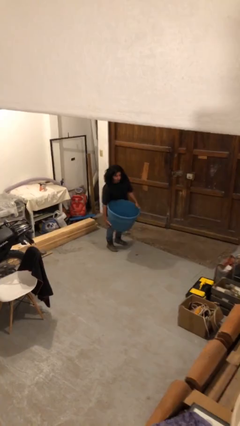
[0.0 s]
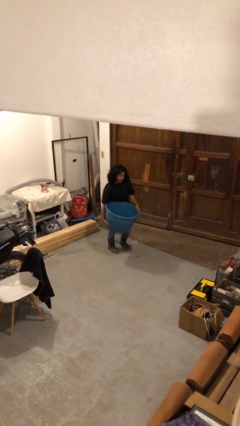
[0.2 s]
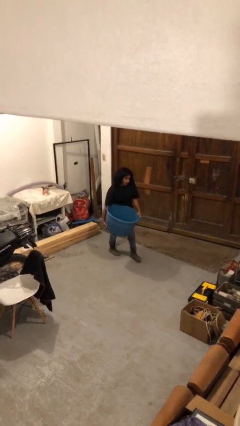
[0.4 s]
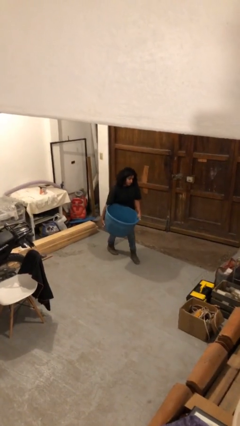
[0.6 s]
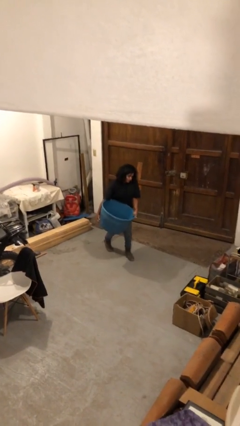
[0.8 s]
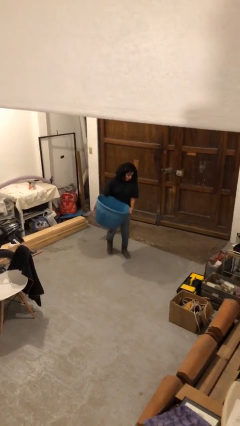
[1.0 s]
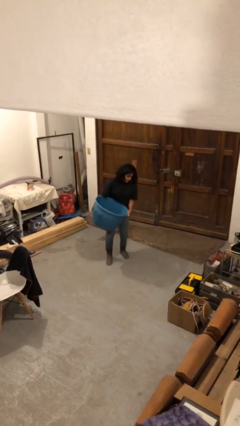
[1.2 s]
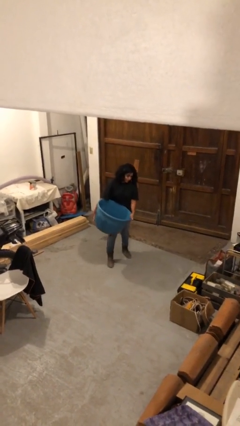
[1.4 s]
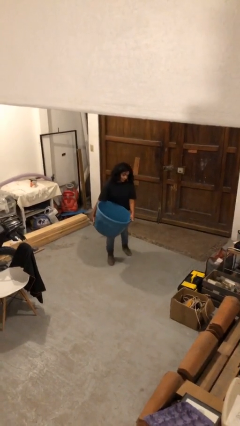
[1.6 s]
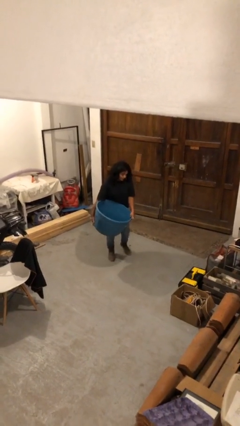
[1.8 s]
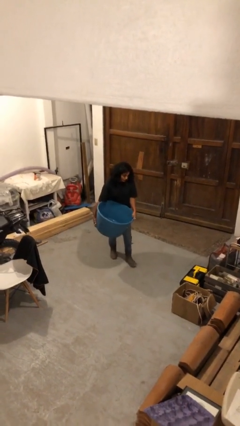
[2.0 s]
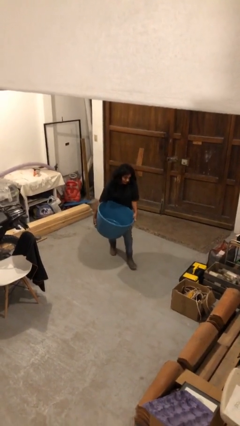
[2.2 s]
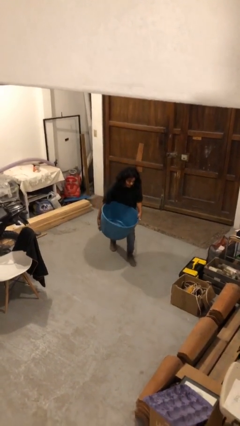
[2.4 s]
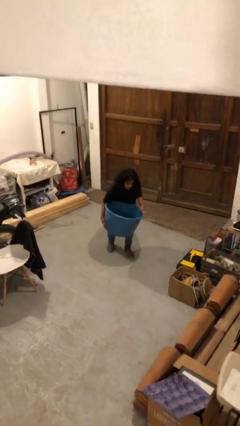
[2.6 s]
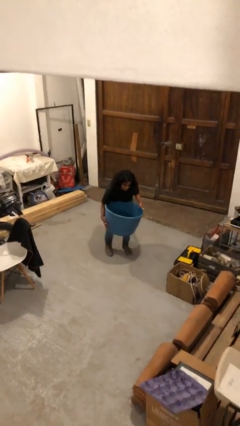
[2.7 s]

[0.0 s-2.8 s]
person carries heavy object

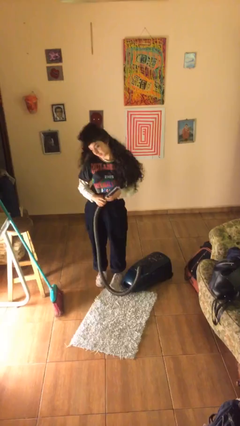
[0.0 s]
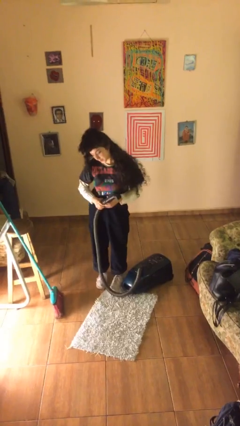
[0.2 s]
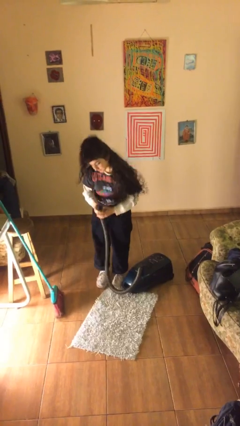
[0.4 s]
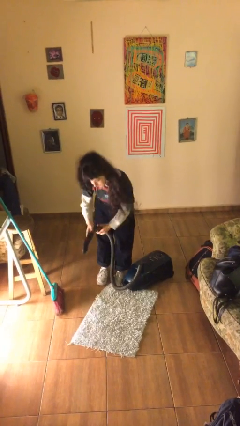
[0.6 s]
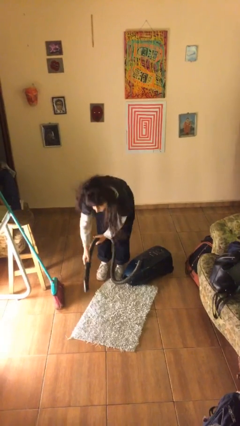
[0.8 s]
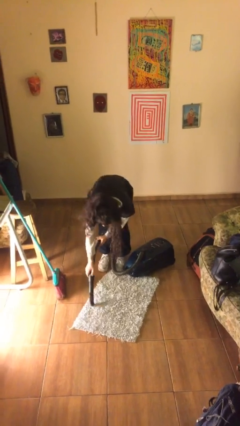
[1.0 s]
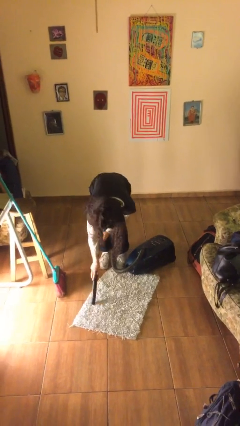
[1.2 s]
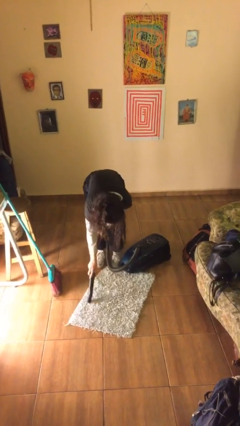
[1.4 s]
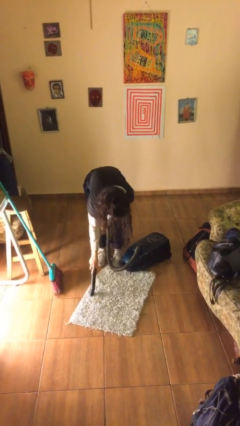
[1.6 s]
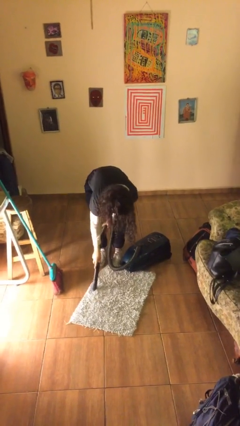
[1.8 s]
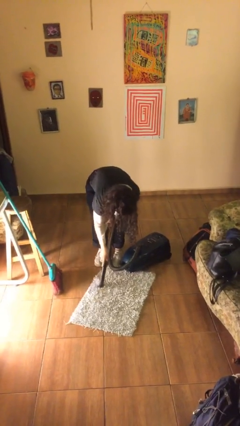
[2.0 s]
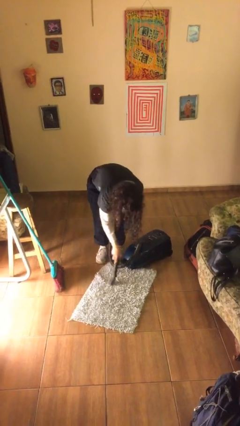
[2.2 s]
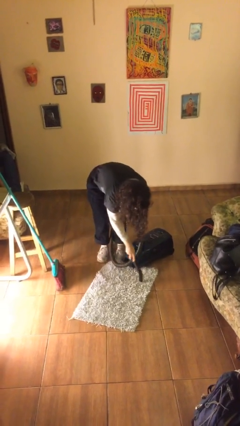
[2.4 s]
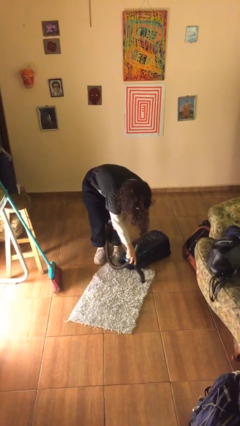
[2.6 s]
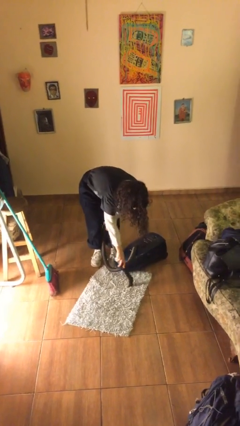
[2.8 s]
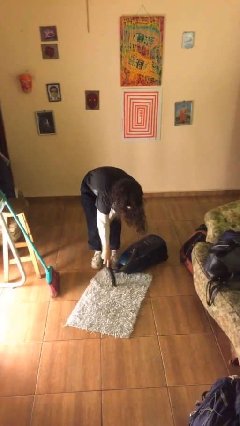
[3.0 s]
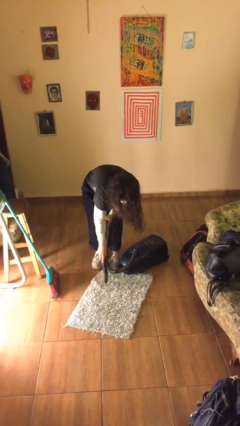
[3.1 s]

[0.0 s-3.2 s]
person vacuums carpet

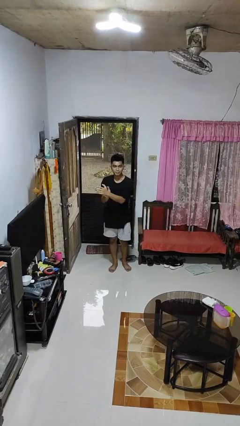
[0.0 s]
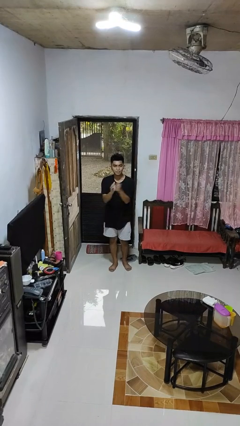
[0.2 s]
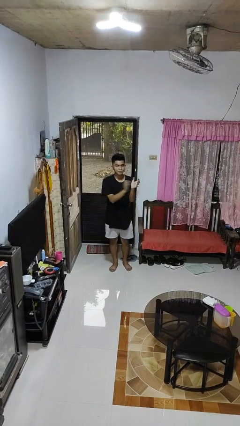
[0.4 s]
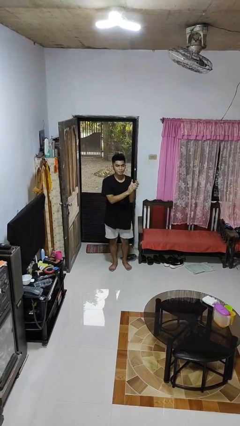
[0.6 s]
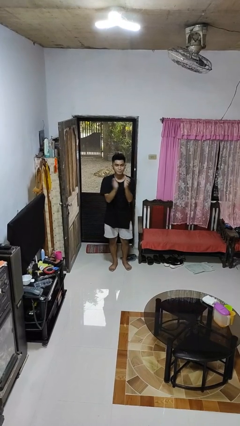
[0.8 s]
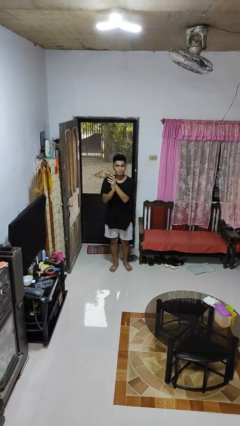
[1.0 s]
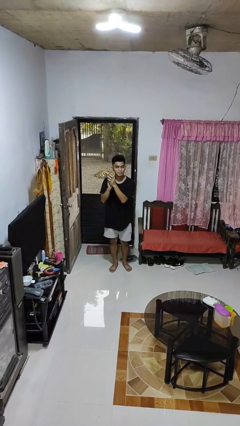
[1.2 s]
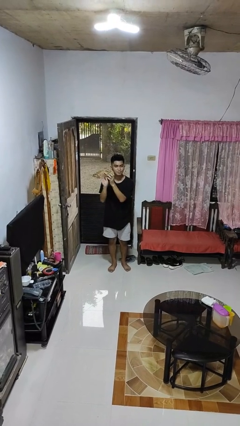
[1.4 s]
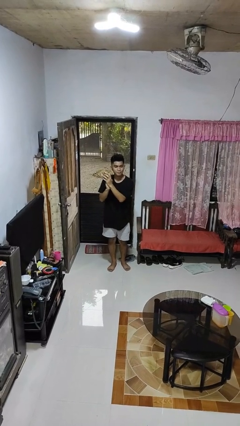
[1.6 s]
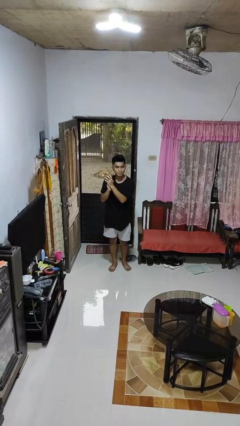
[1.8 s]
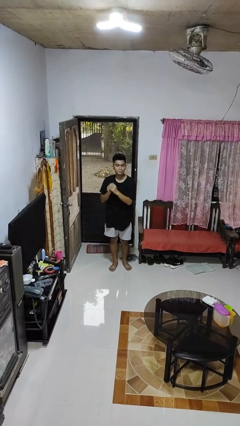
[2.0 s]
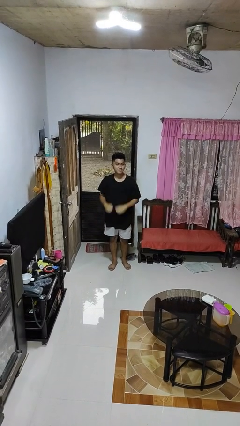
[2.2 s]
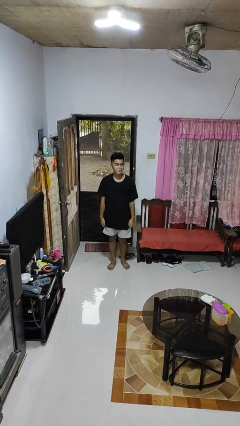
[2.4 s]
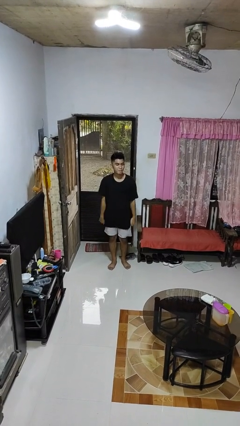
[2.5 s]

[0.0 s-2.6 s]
person claps hands

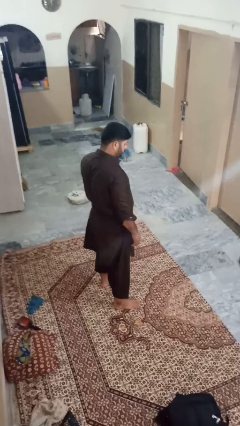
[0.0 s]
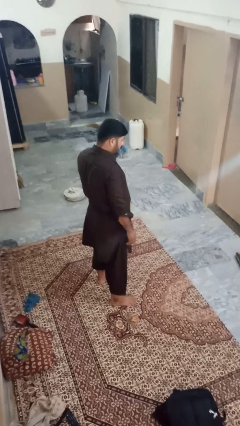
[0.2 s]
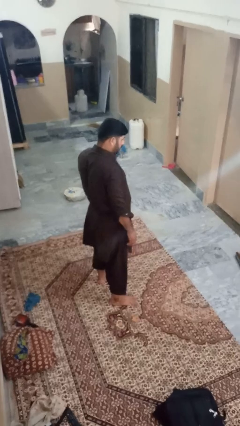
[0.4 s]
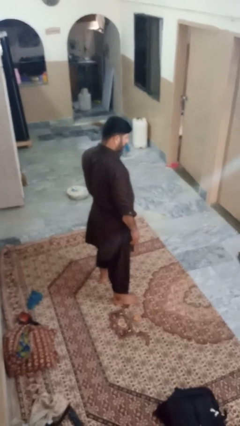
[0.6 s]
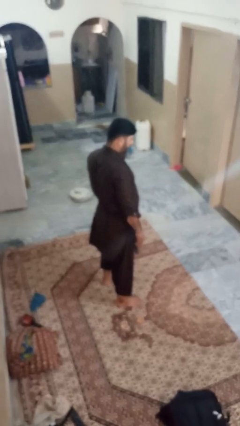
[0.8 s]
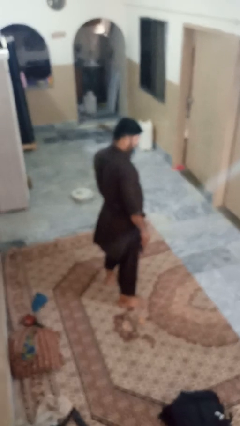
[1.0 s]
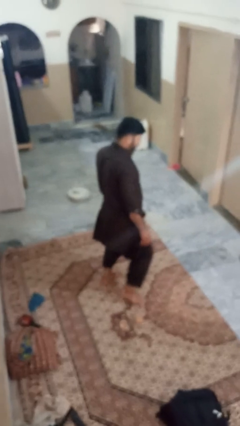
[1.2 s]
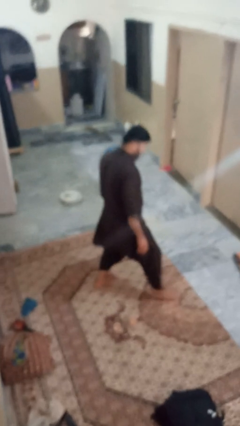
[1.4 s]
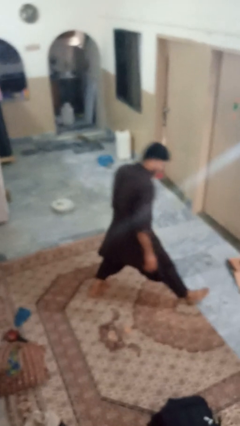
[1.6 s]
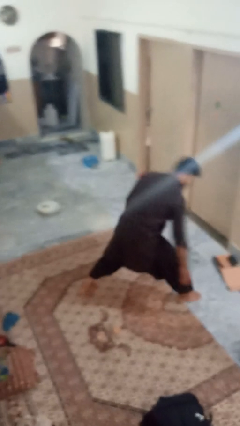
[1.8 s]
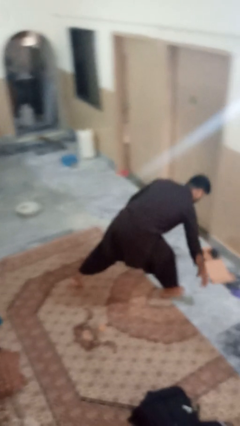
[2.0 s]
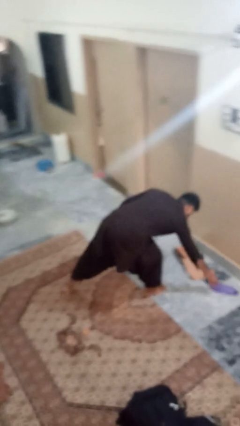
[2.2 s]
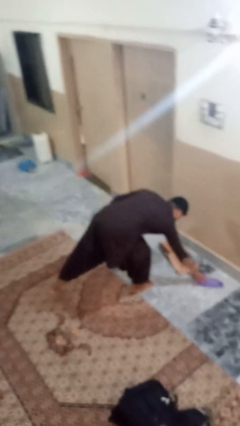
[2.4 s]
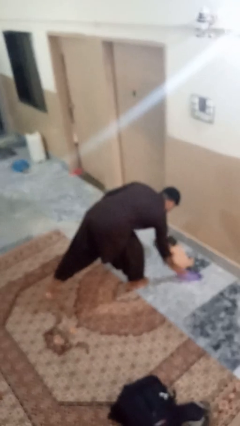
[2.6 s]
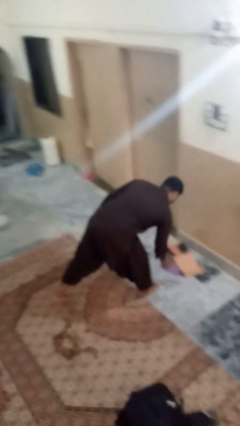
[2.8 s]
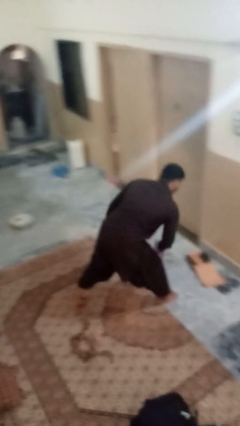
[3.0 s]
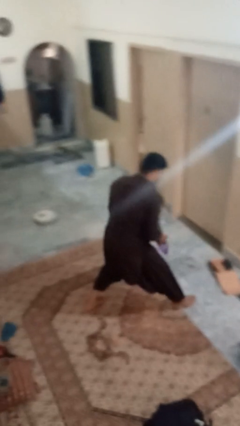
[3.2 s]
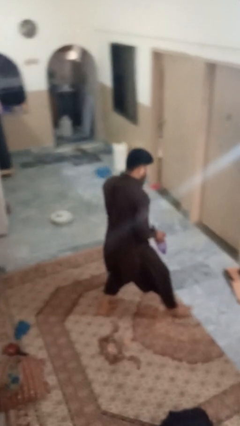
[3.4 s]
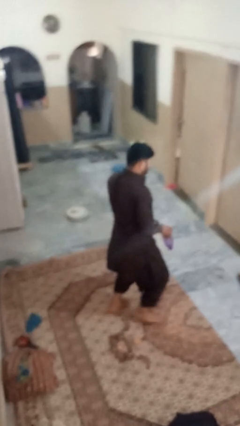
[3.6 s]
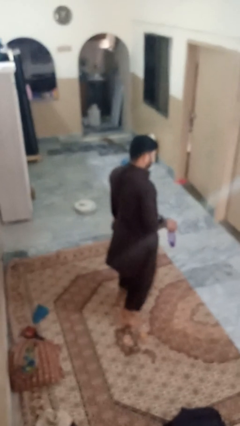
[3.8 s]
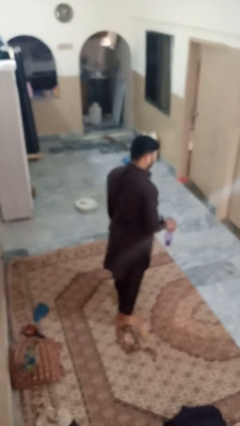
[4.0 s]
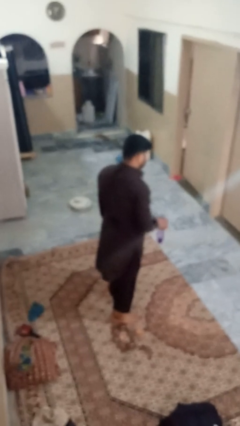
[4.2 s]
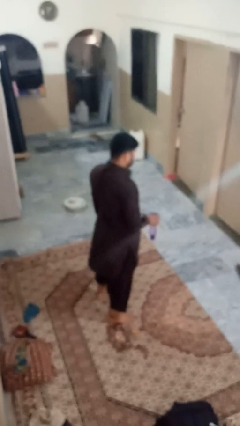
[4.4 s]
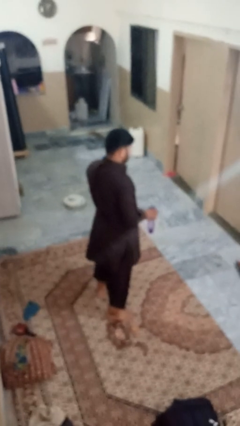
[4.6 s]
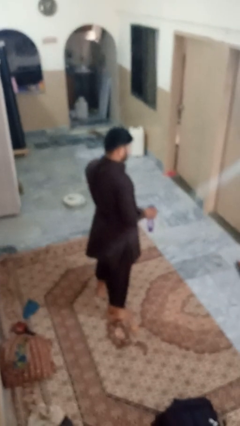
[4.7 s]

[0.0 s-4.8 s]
person picks up object from floor

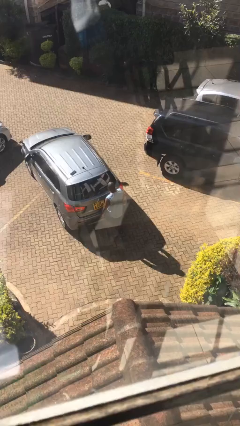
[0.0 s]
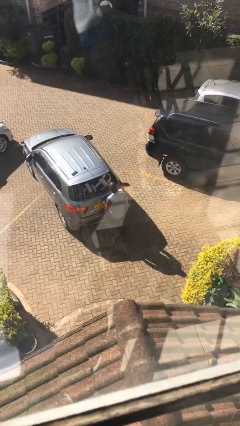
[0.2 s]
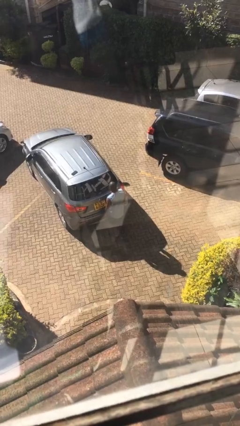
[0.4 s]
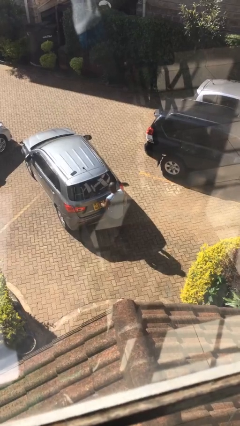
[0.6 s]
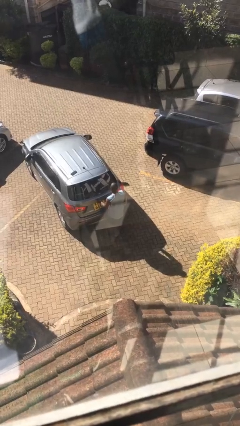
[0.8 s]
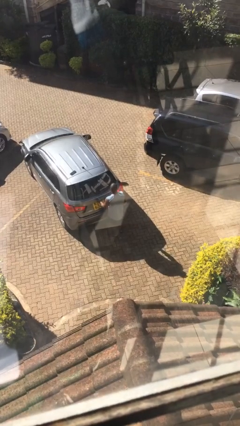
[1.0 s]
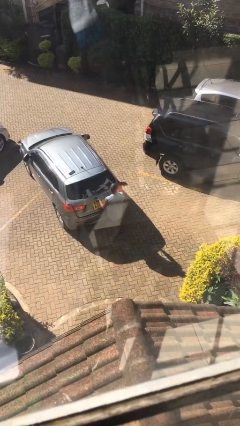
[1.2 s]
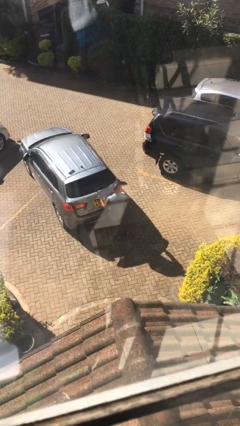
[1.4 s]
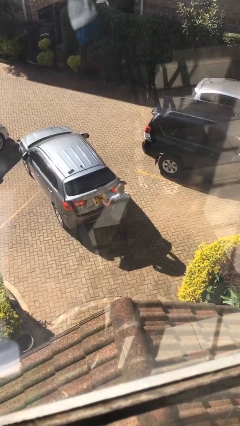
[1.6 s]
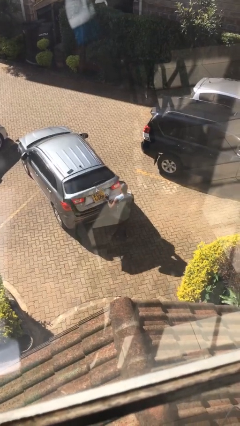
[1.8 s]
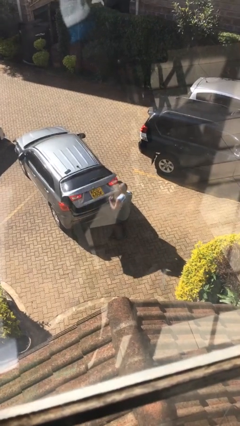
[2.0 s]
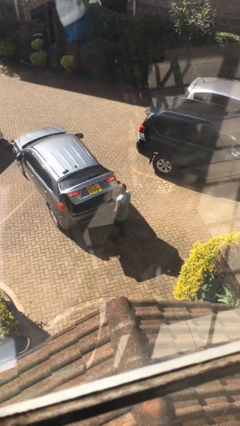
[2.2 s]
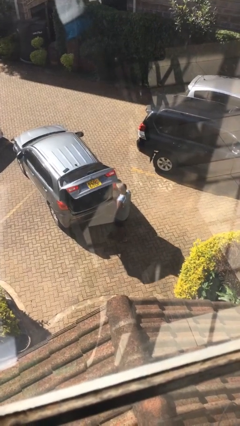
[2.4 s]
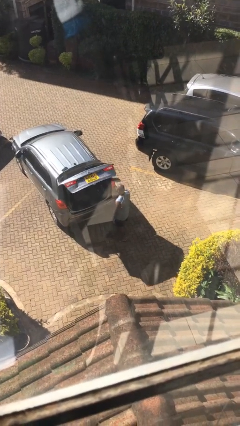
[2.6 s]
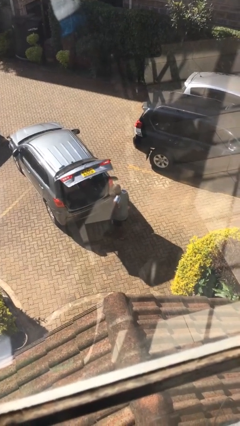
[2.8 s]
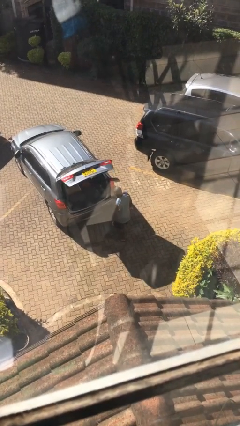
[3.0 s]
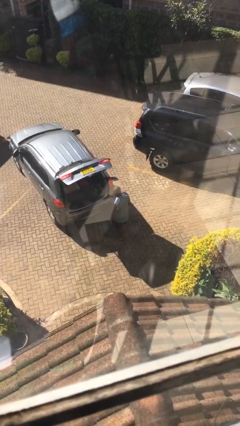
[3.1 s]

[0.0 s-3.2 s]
person opens car trunk

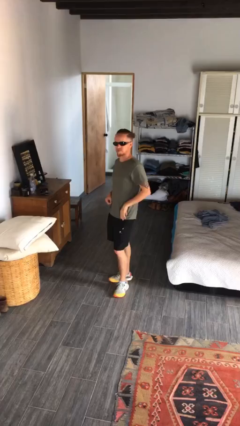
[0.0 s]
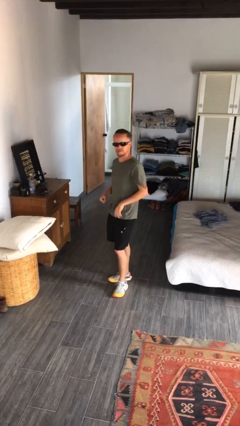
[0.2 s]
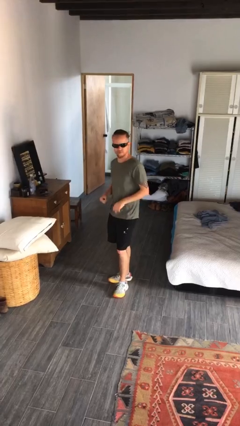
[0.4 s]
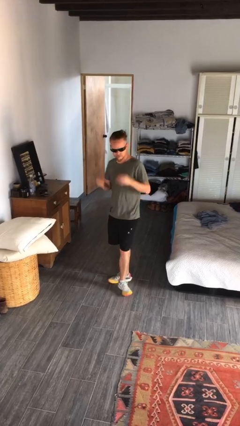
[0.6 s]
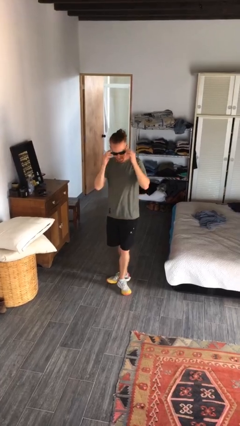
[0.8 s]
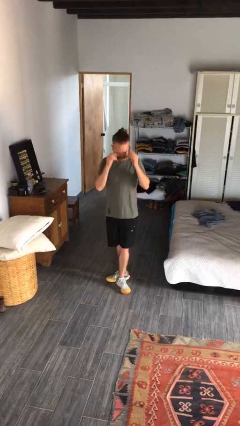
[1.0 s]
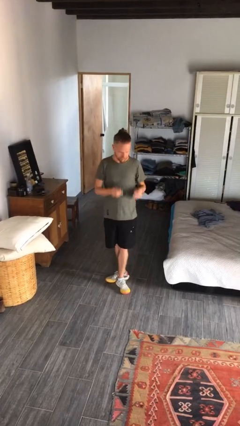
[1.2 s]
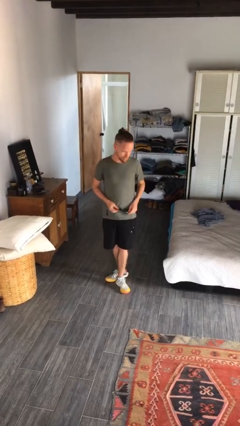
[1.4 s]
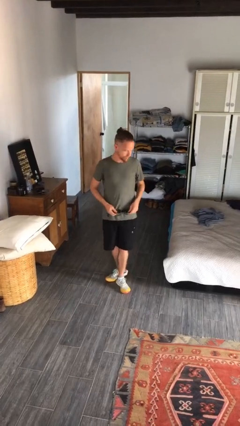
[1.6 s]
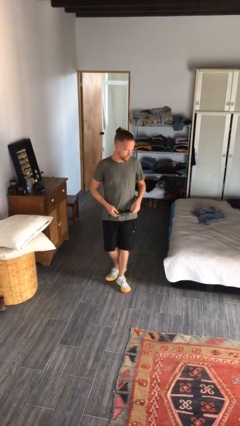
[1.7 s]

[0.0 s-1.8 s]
person takes off sunglasses
